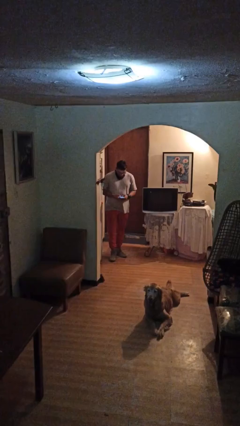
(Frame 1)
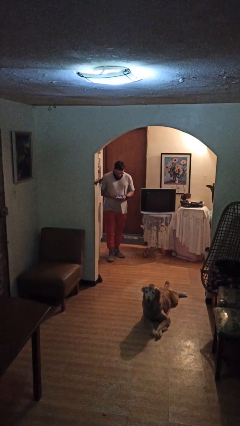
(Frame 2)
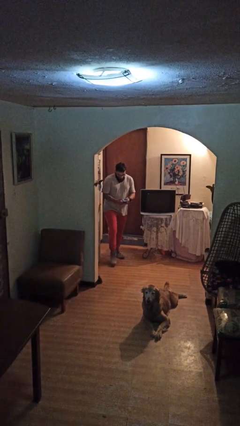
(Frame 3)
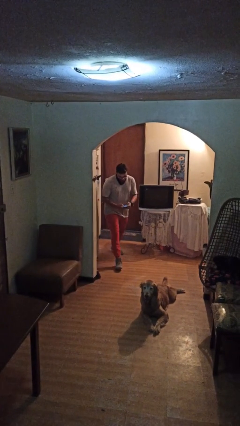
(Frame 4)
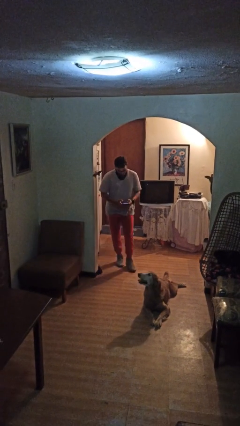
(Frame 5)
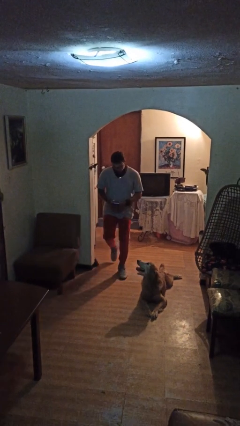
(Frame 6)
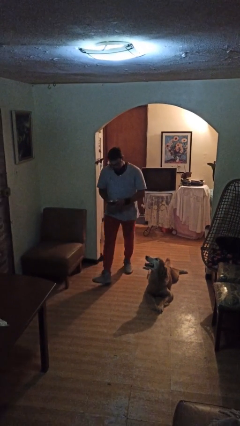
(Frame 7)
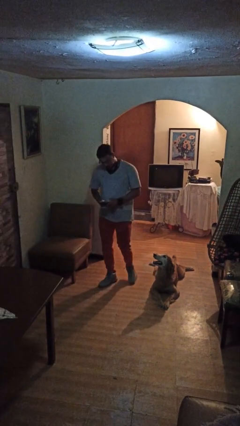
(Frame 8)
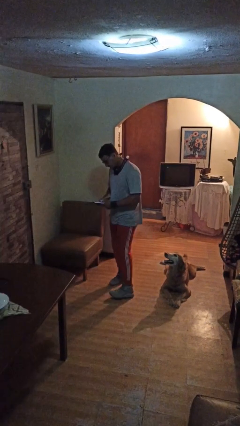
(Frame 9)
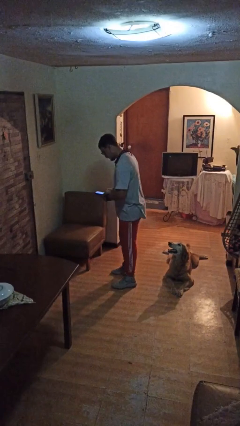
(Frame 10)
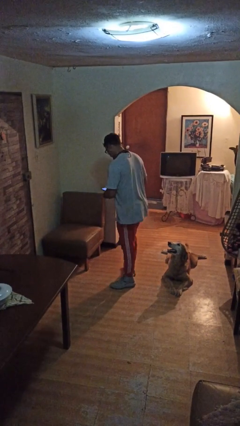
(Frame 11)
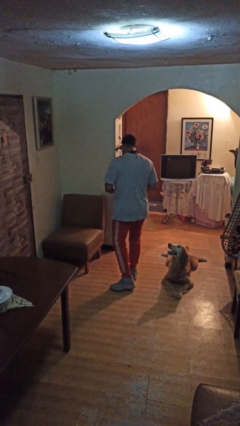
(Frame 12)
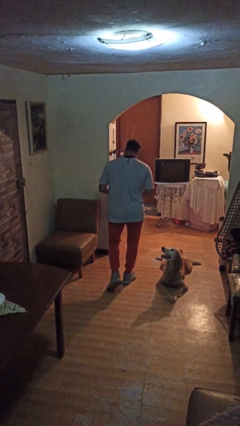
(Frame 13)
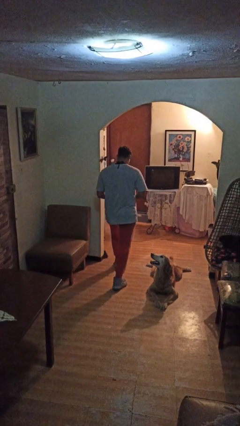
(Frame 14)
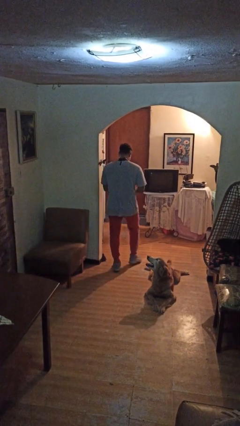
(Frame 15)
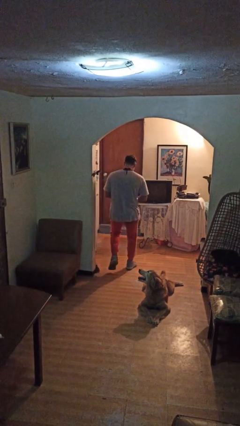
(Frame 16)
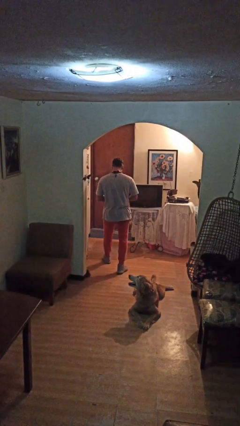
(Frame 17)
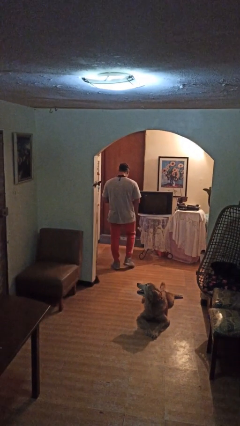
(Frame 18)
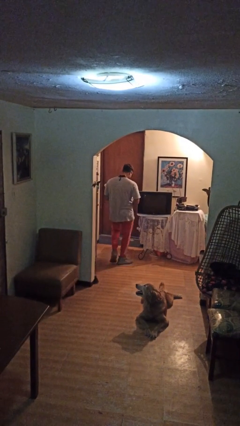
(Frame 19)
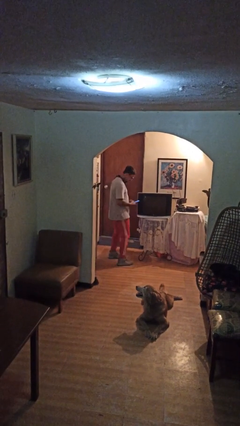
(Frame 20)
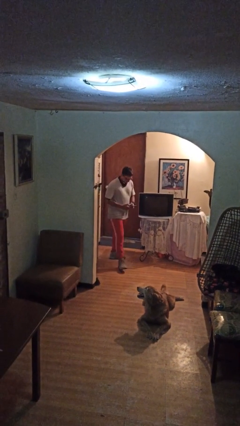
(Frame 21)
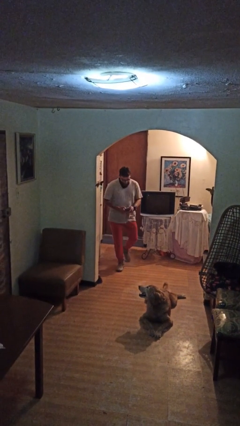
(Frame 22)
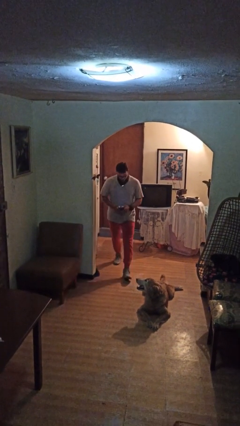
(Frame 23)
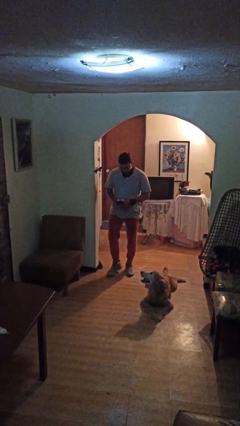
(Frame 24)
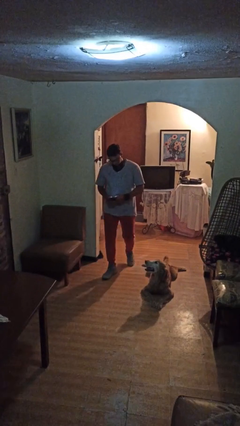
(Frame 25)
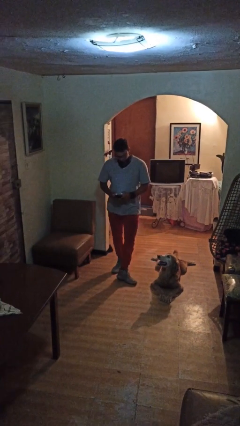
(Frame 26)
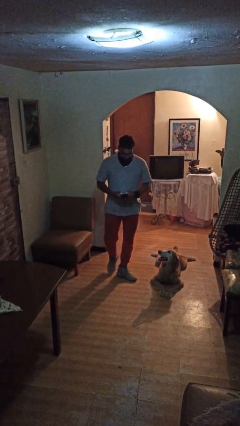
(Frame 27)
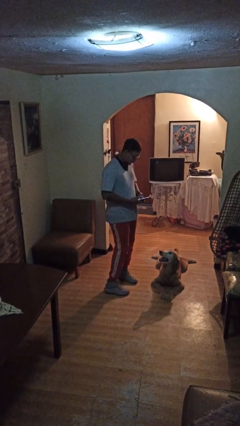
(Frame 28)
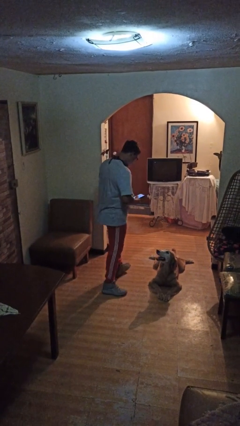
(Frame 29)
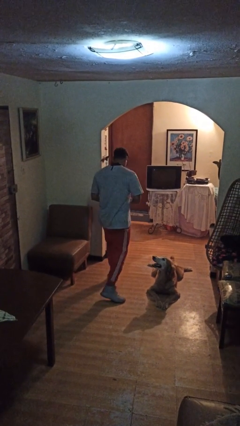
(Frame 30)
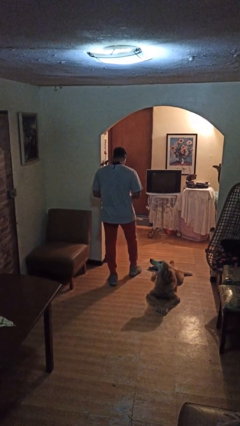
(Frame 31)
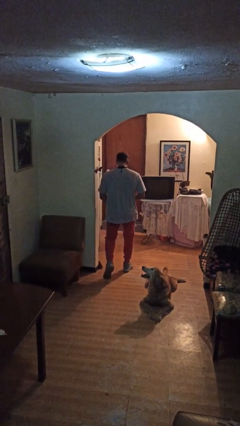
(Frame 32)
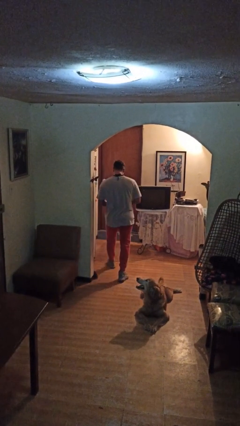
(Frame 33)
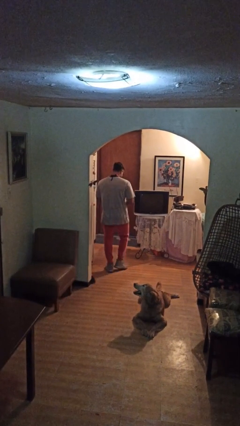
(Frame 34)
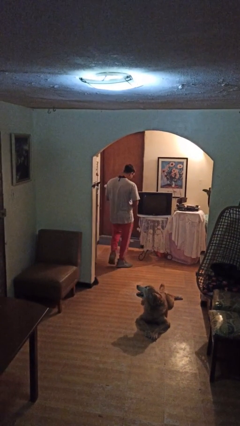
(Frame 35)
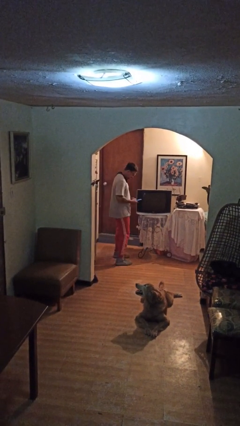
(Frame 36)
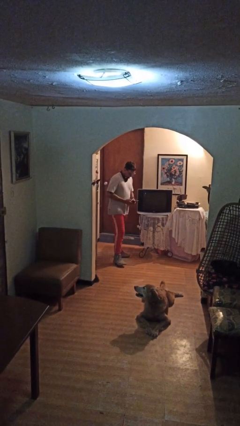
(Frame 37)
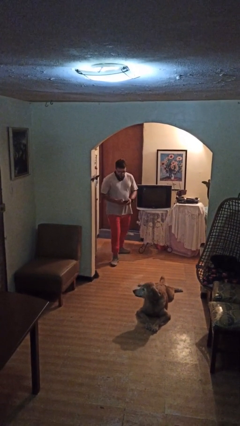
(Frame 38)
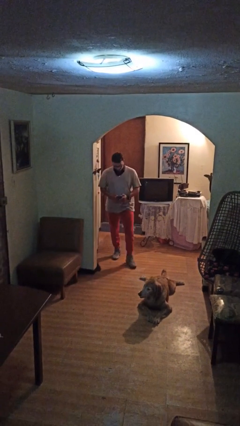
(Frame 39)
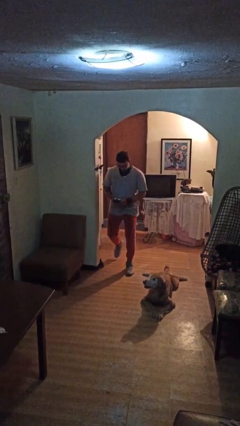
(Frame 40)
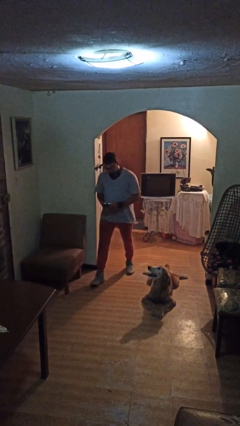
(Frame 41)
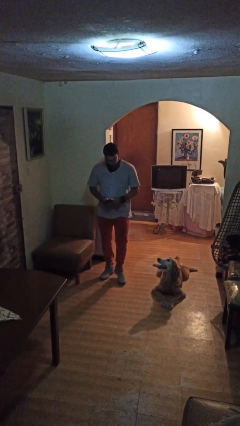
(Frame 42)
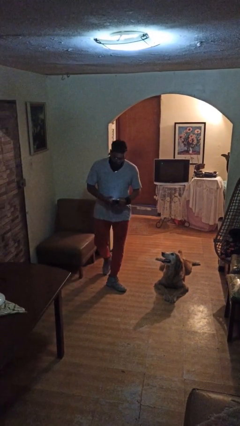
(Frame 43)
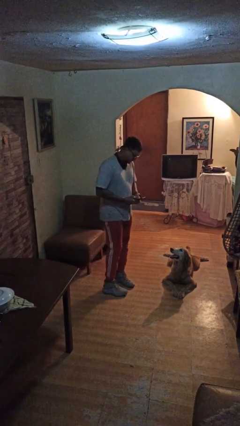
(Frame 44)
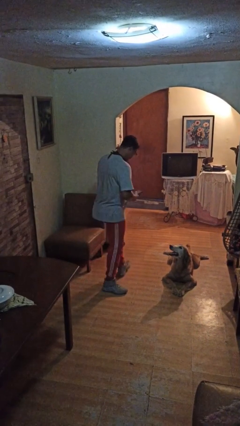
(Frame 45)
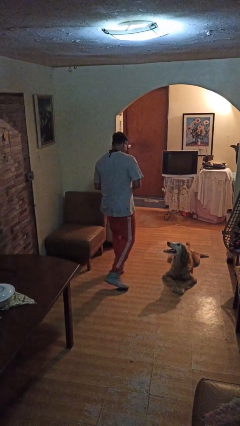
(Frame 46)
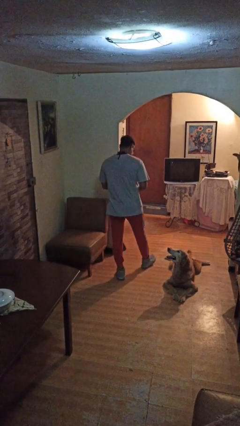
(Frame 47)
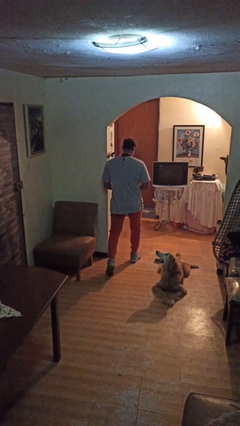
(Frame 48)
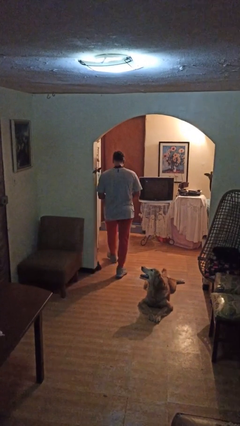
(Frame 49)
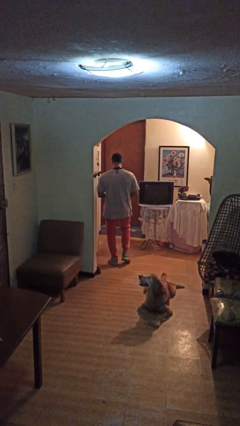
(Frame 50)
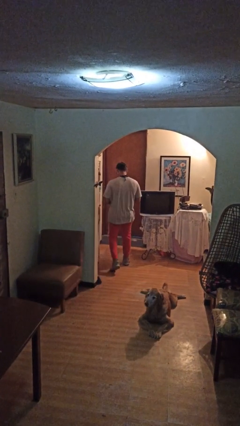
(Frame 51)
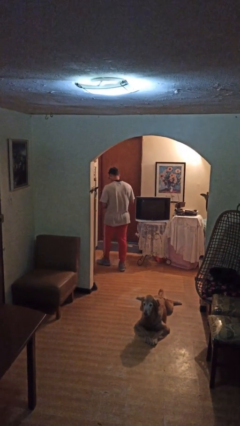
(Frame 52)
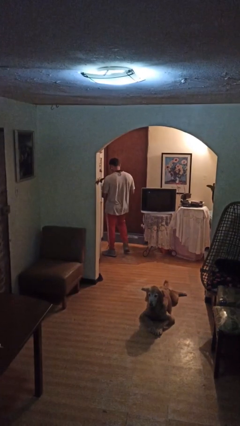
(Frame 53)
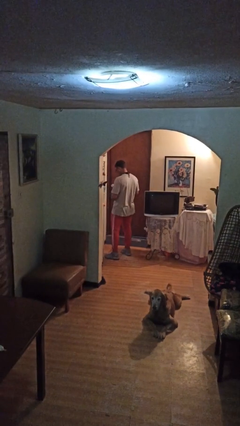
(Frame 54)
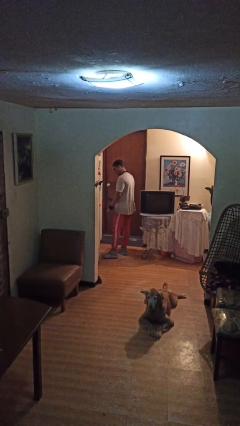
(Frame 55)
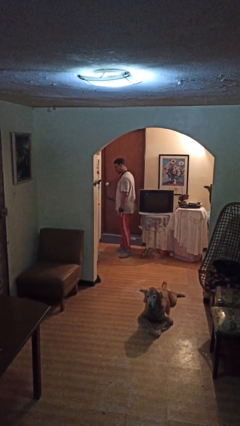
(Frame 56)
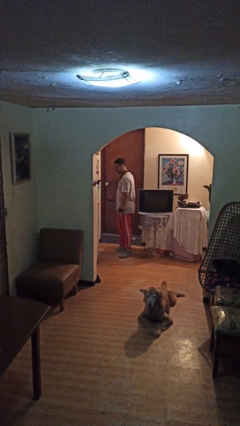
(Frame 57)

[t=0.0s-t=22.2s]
person texts on phone

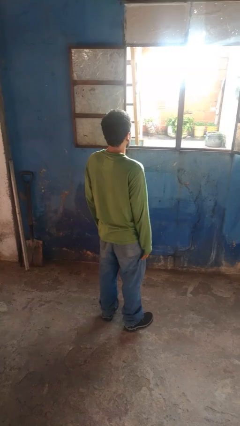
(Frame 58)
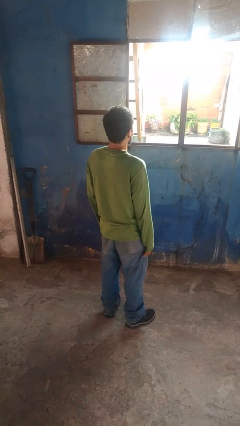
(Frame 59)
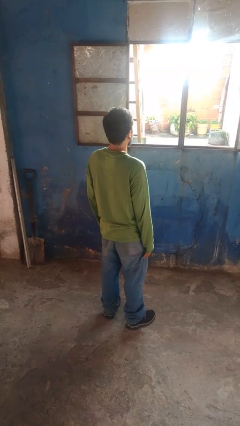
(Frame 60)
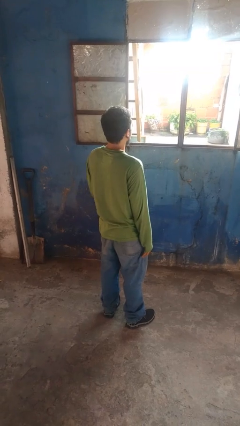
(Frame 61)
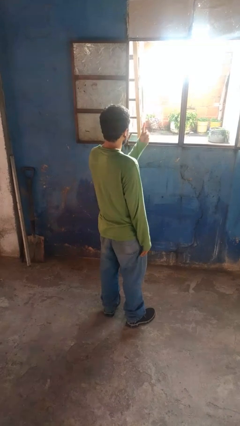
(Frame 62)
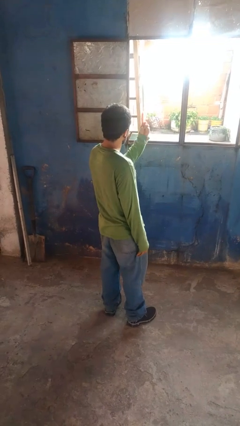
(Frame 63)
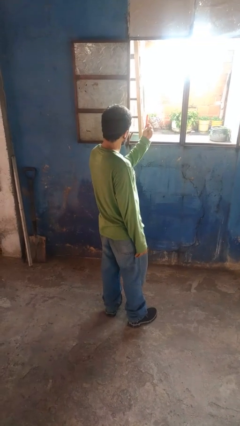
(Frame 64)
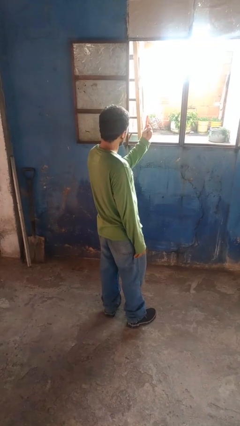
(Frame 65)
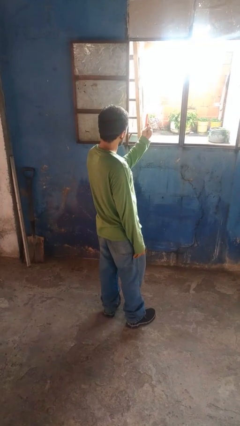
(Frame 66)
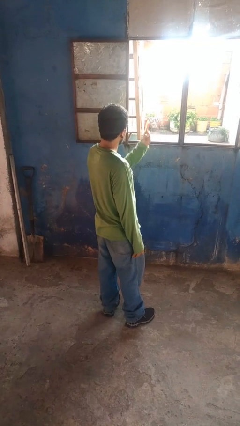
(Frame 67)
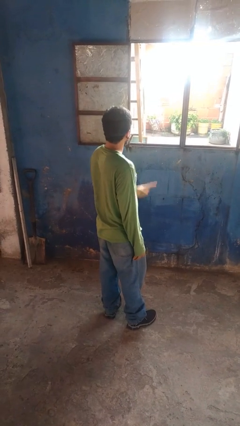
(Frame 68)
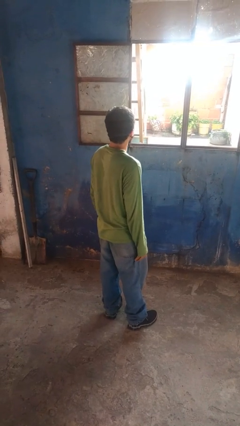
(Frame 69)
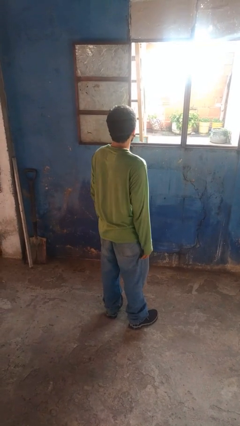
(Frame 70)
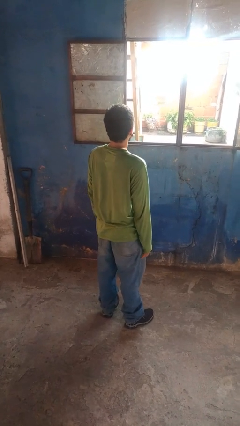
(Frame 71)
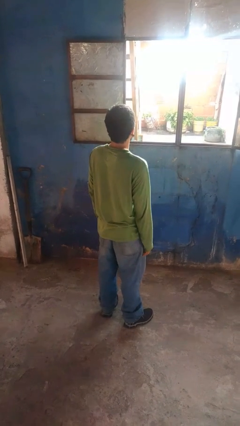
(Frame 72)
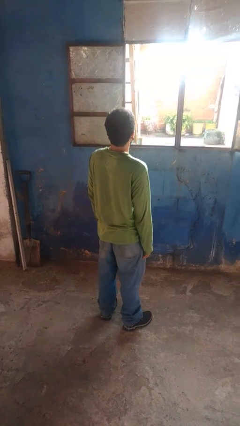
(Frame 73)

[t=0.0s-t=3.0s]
person gestures number one

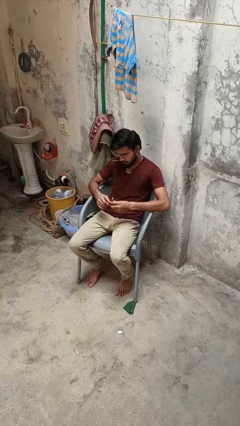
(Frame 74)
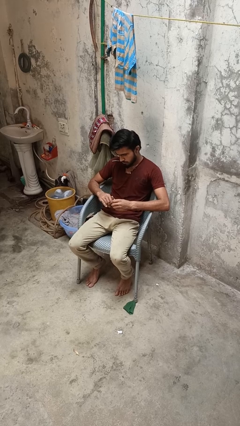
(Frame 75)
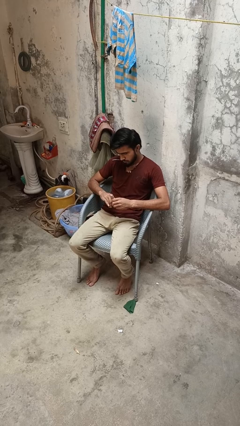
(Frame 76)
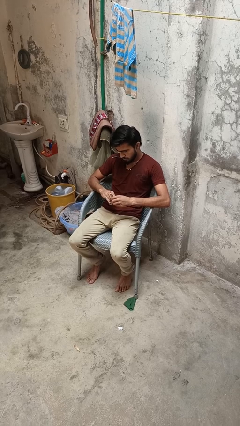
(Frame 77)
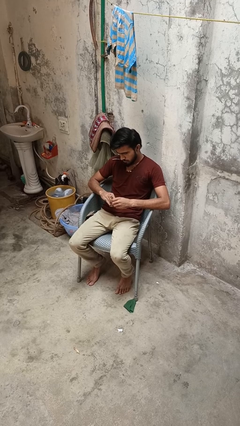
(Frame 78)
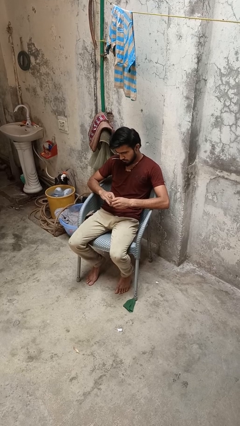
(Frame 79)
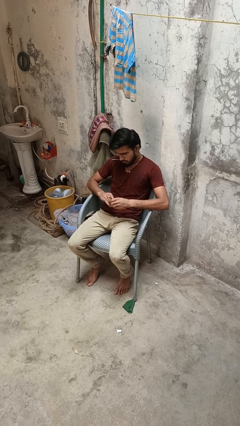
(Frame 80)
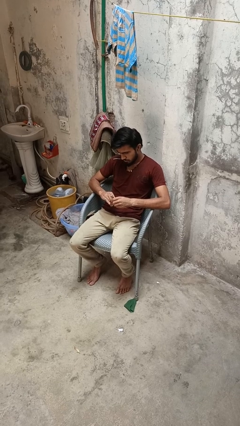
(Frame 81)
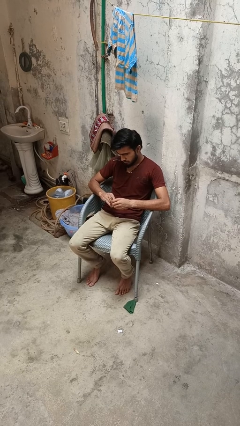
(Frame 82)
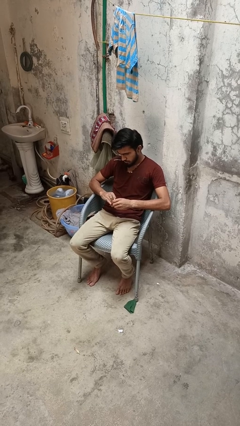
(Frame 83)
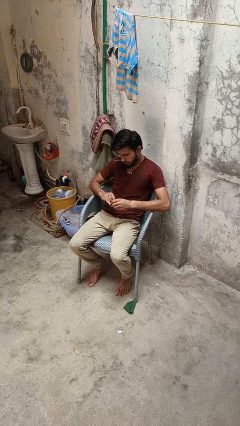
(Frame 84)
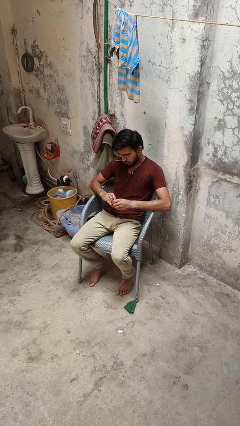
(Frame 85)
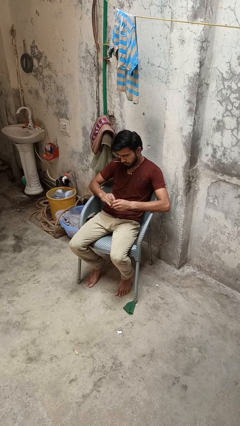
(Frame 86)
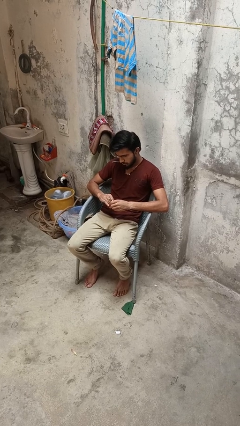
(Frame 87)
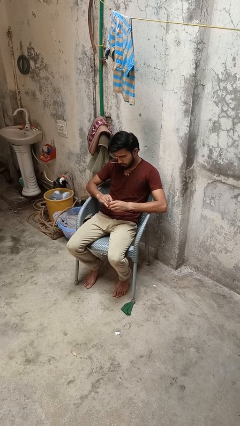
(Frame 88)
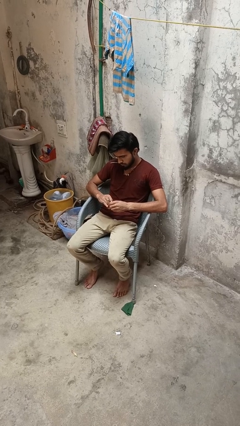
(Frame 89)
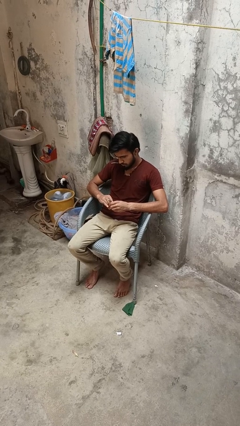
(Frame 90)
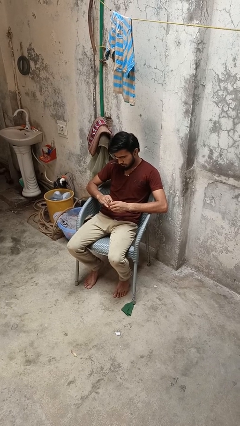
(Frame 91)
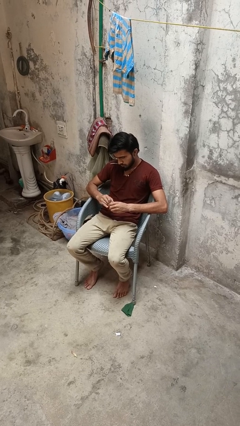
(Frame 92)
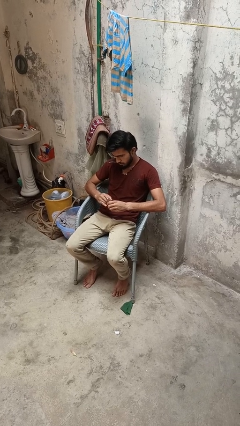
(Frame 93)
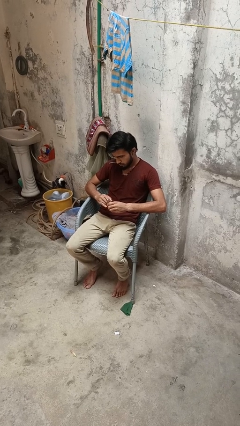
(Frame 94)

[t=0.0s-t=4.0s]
person files fingernails
